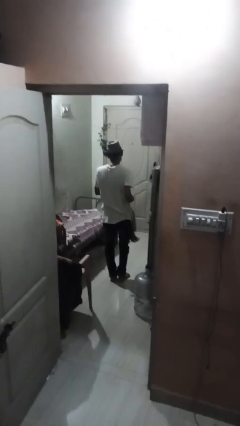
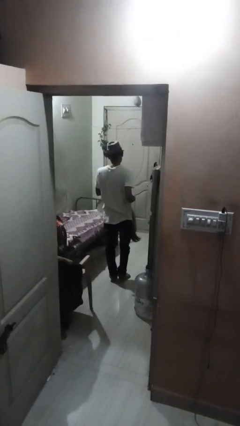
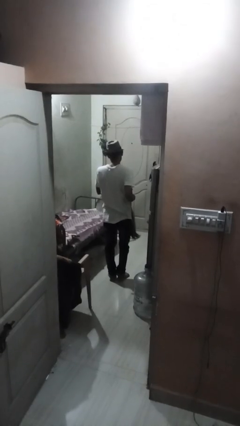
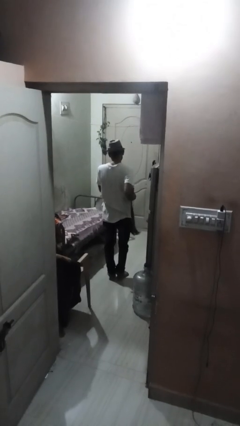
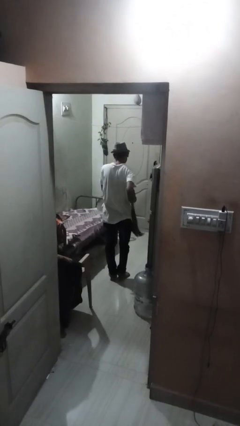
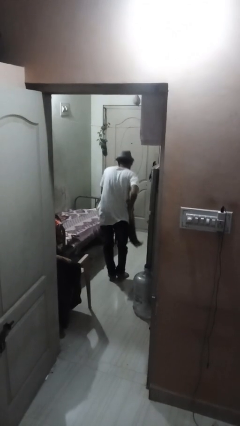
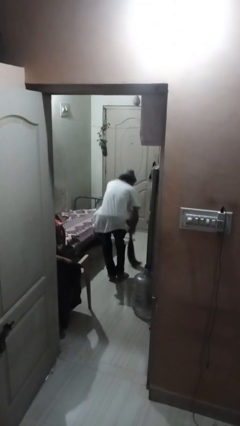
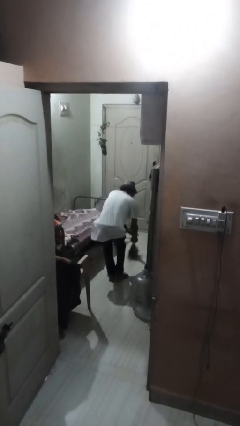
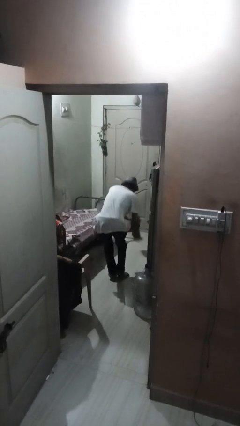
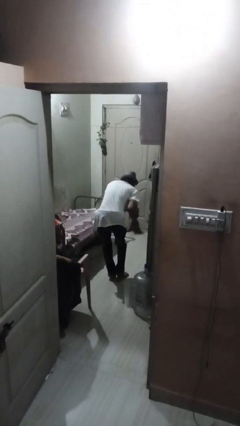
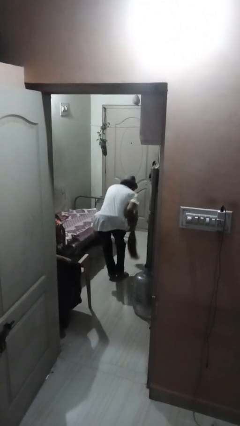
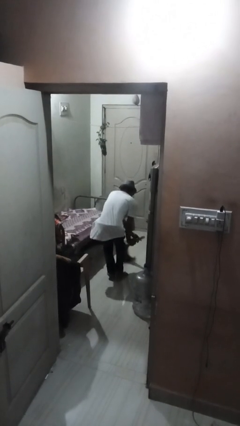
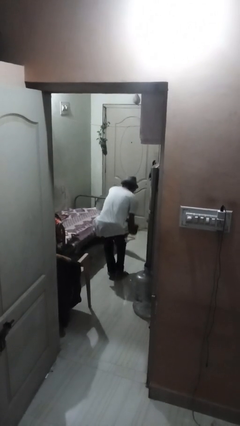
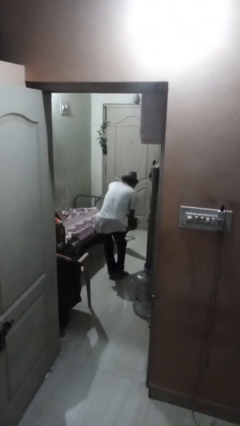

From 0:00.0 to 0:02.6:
person mops

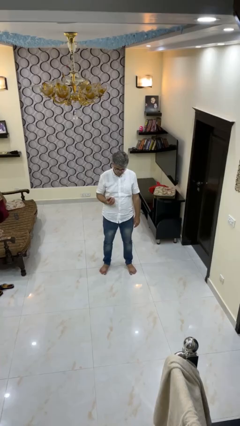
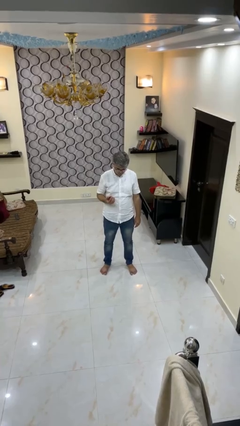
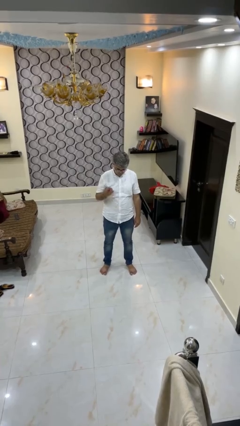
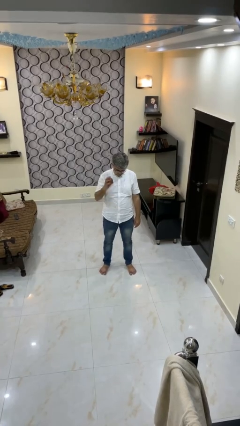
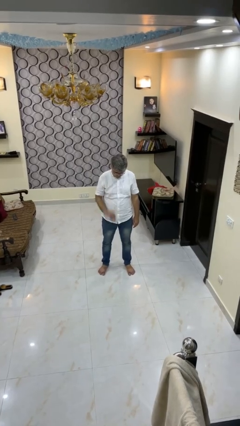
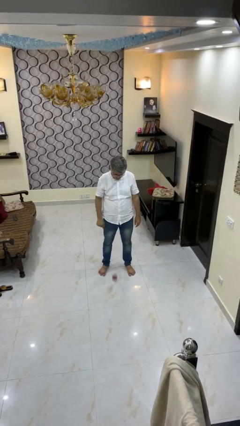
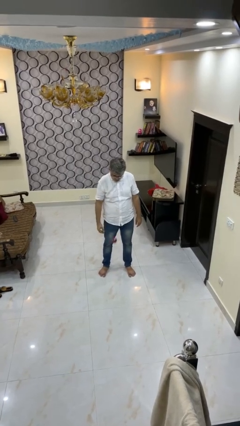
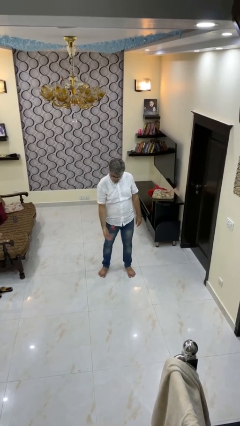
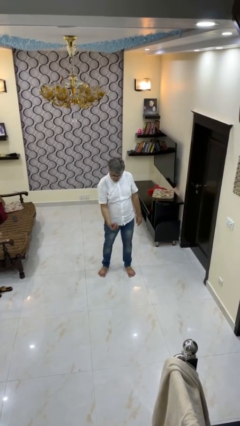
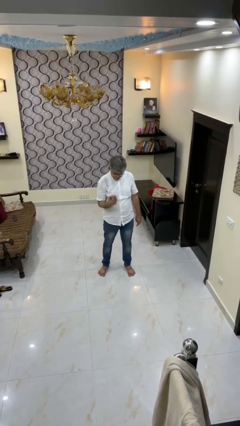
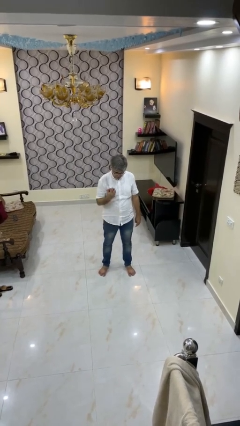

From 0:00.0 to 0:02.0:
person bounces ball on floor

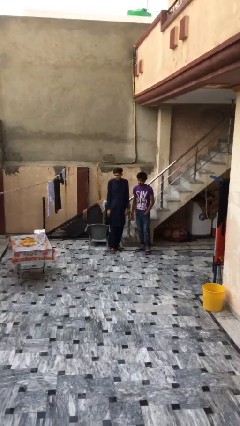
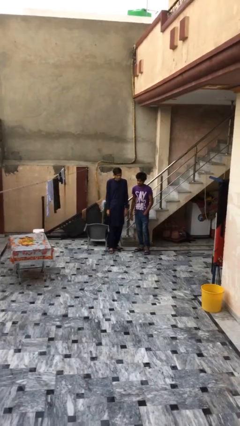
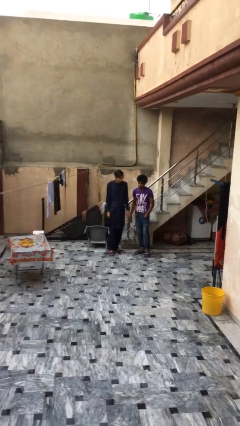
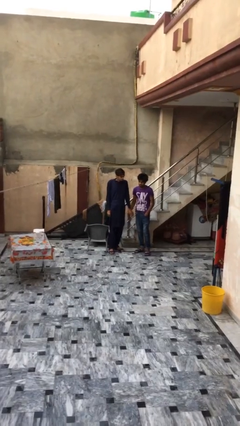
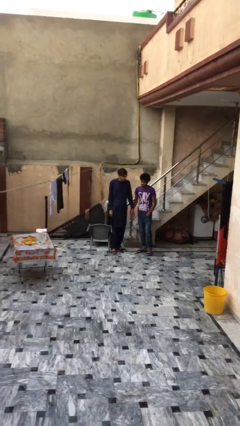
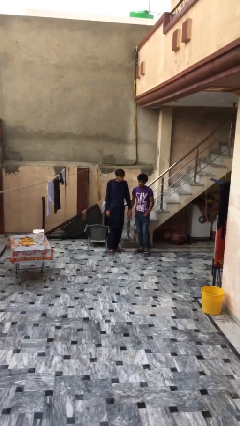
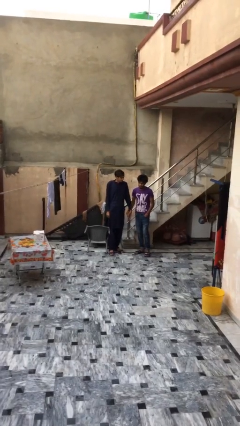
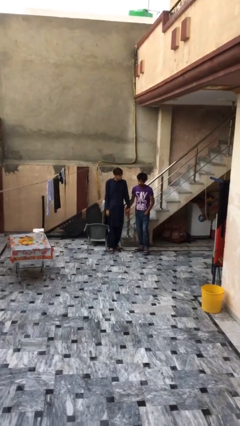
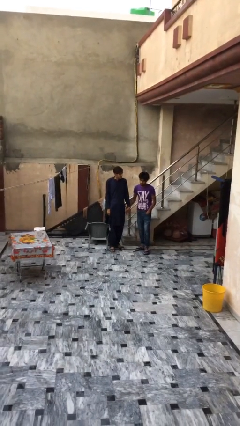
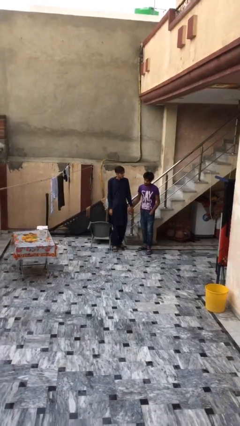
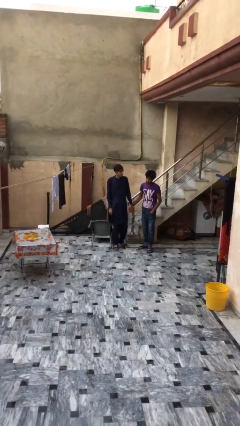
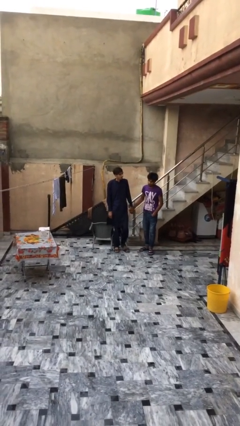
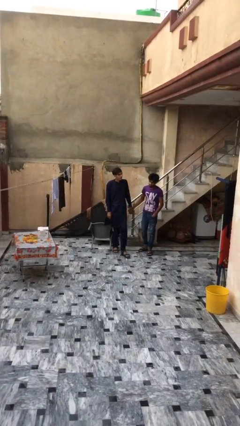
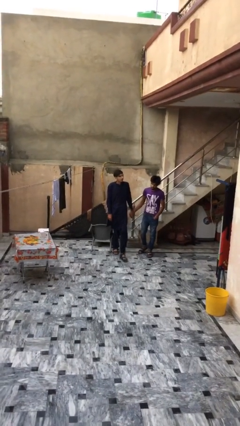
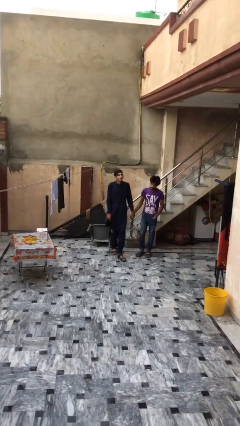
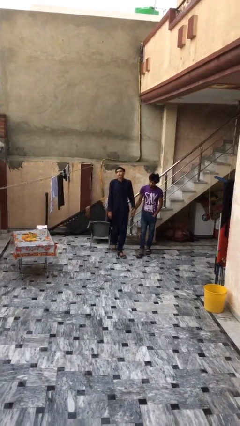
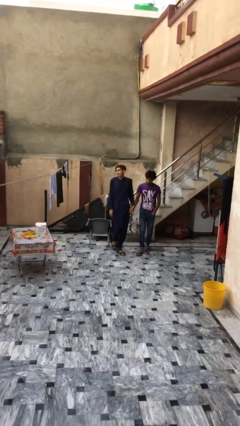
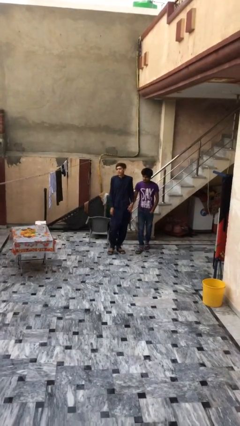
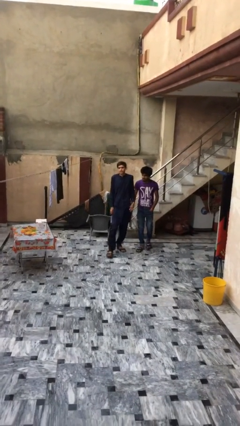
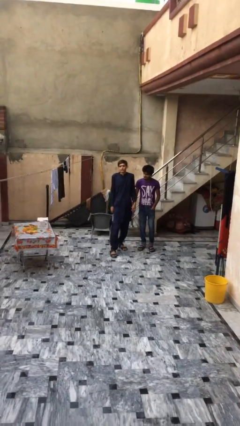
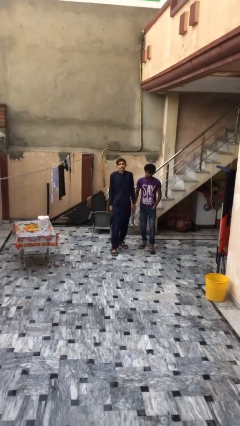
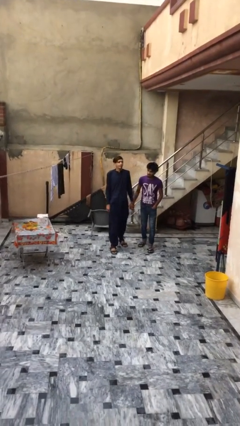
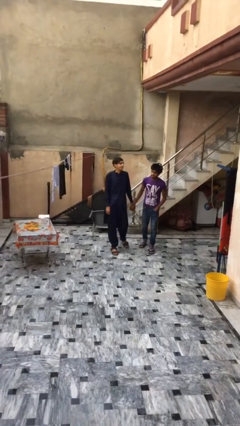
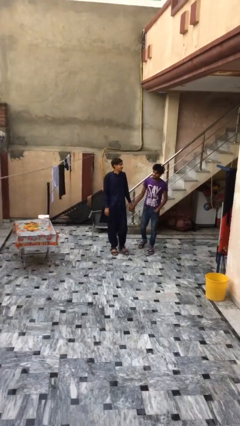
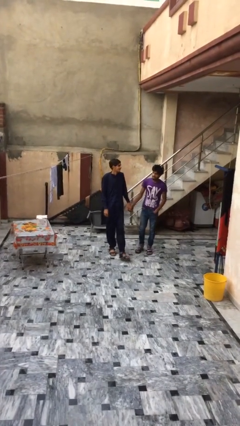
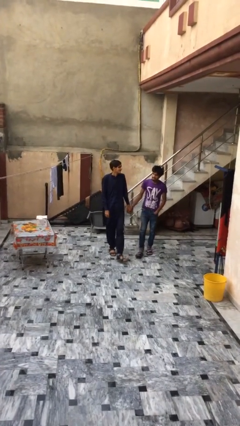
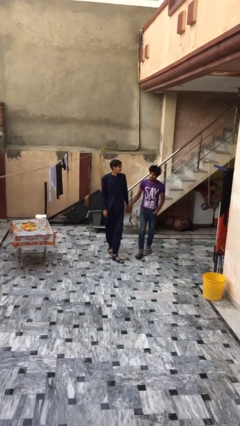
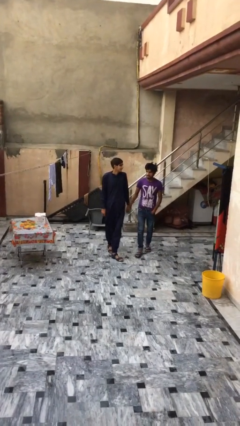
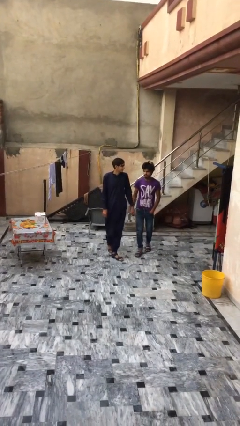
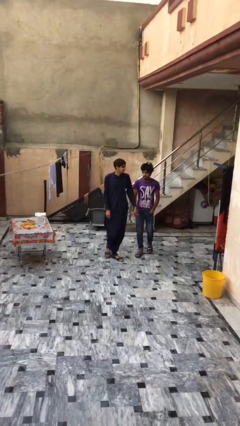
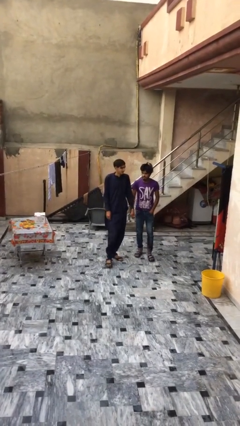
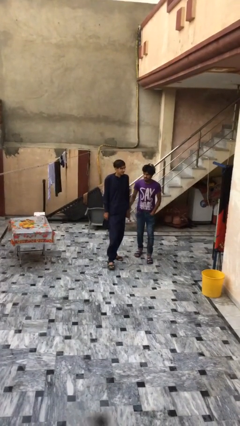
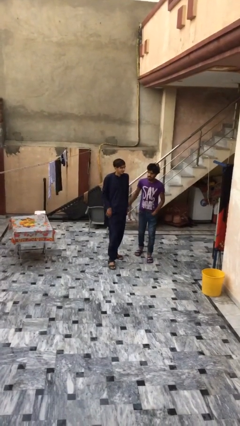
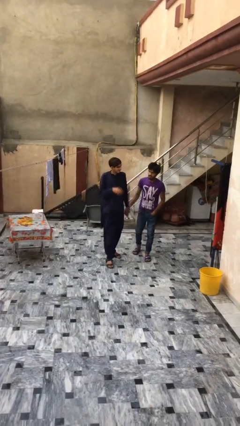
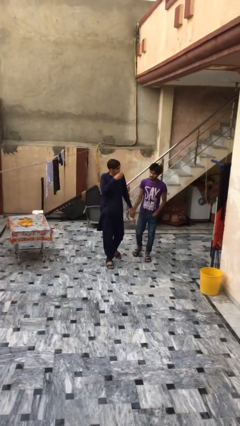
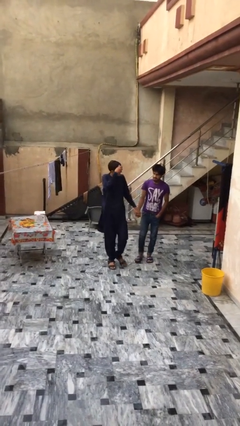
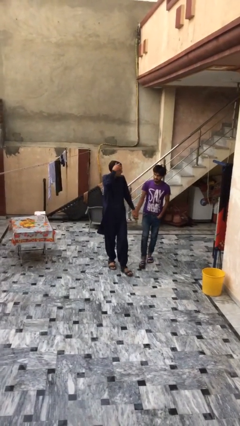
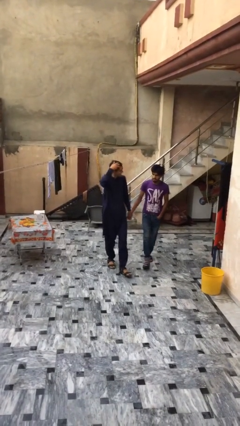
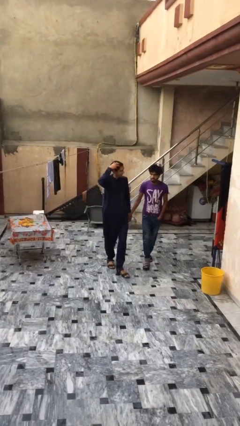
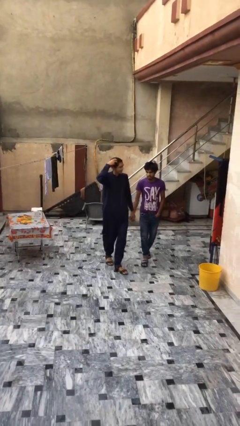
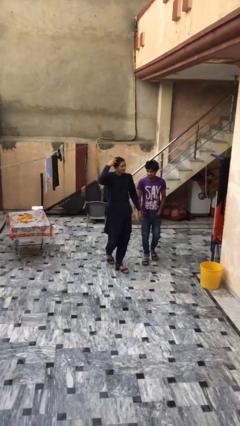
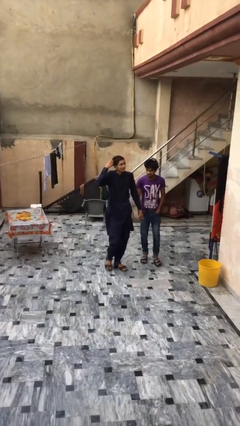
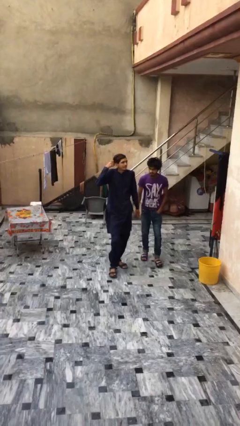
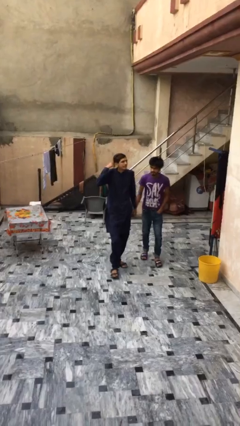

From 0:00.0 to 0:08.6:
person holds hand

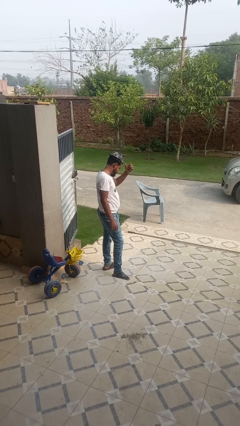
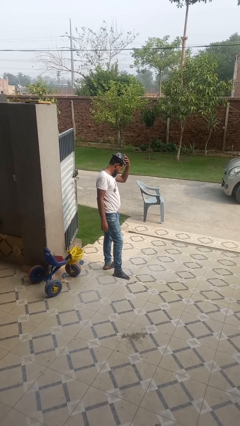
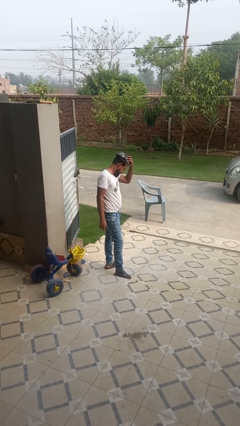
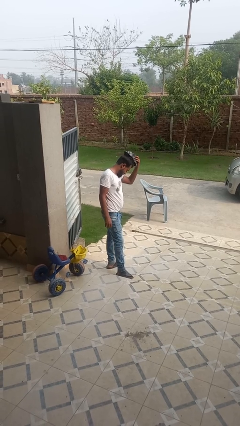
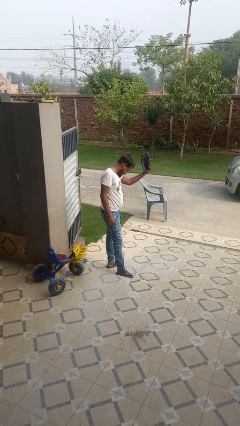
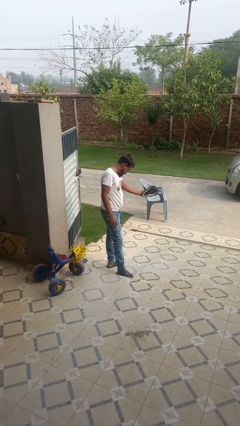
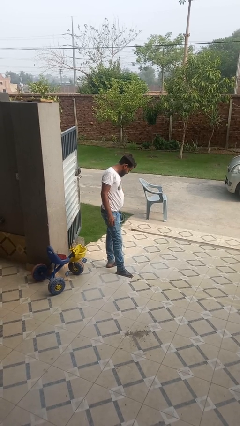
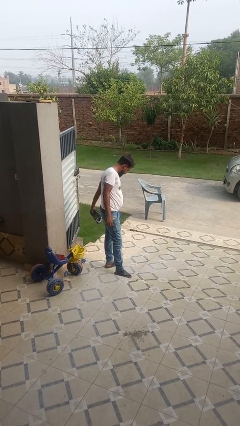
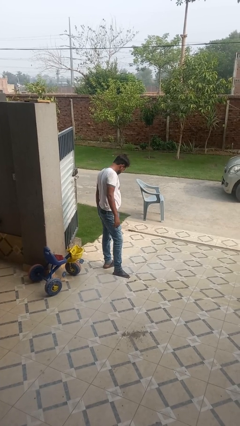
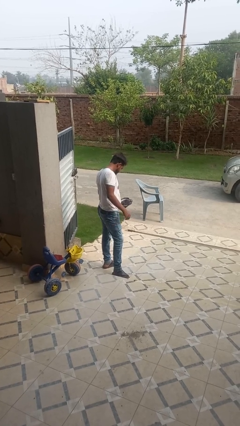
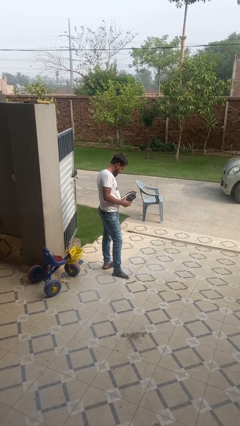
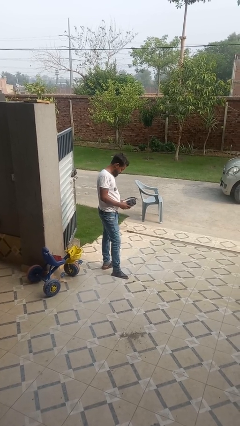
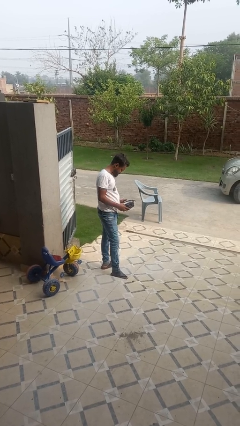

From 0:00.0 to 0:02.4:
person takes off hat

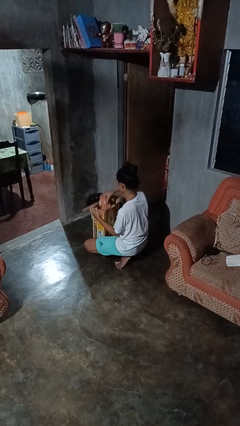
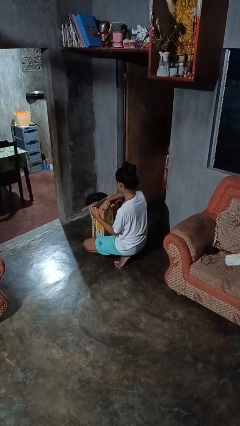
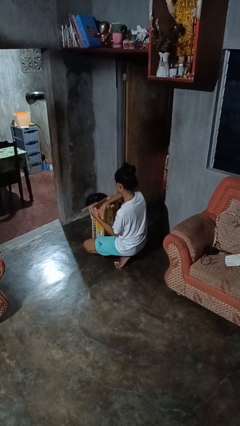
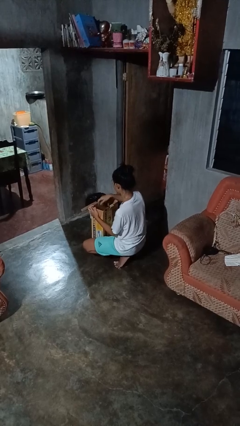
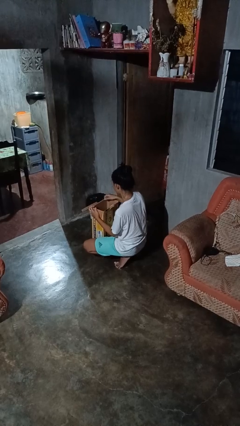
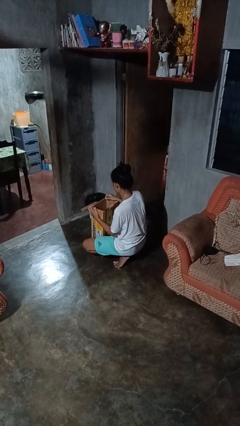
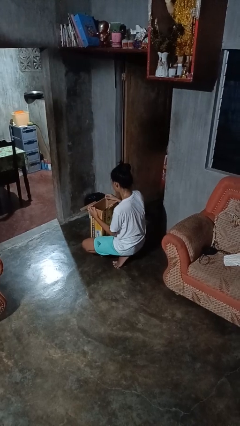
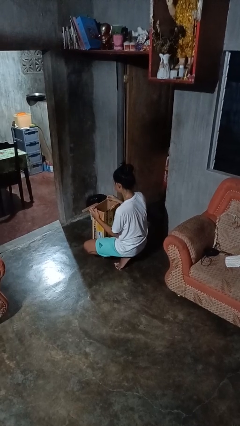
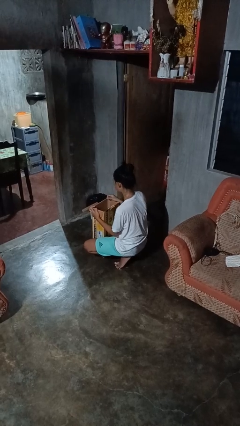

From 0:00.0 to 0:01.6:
person puts object into box
